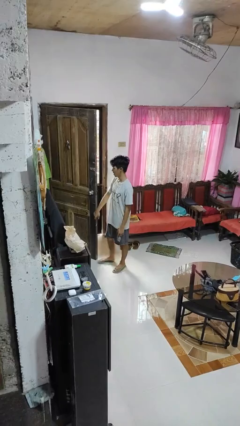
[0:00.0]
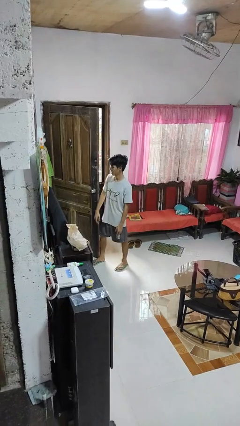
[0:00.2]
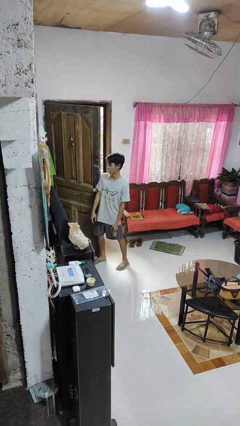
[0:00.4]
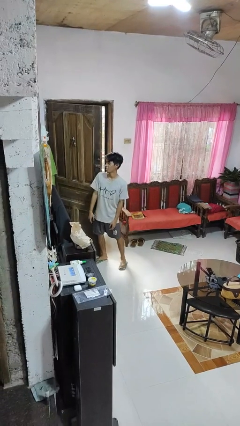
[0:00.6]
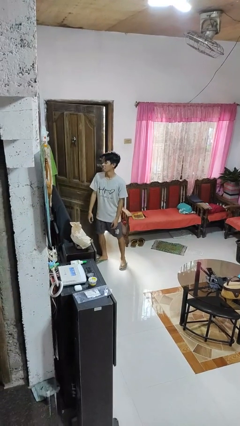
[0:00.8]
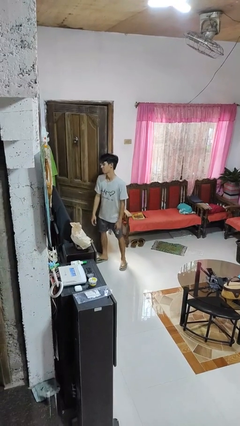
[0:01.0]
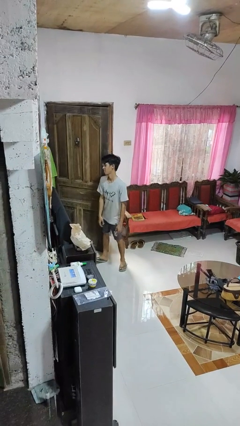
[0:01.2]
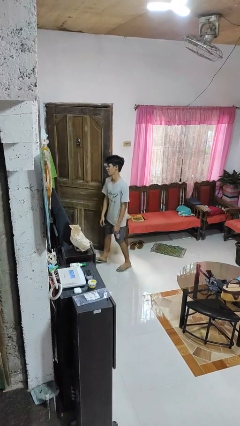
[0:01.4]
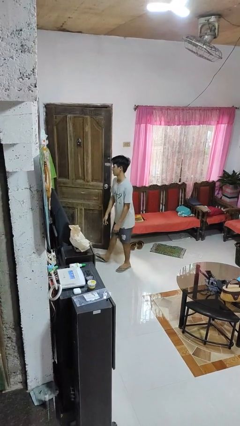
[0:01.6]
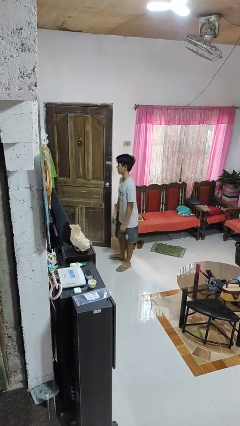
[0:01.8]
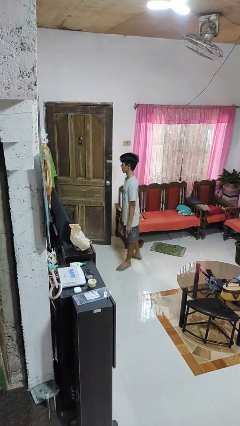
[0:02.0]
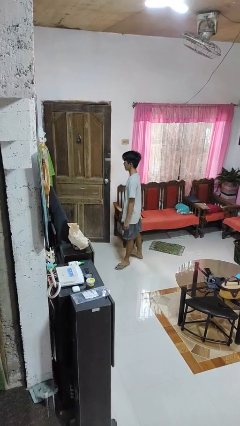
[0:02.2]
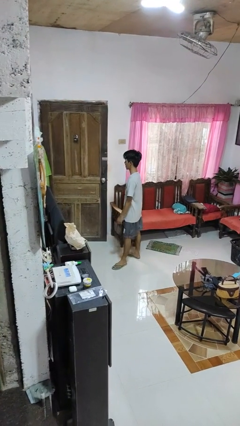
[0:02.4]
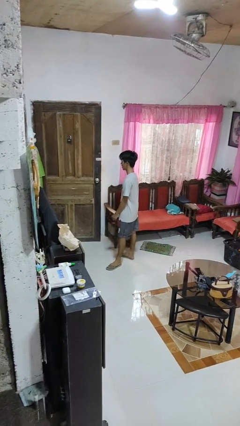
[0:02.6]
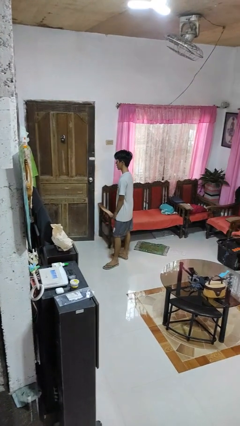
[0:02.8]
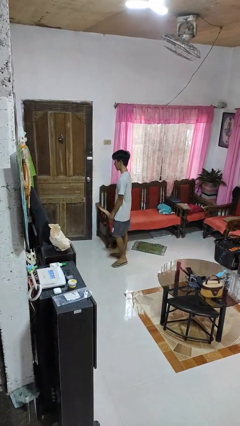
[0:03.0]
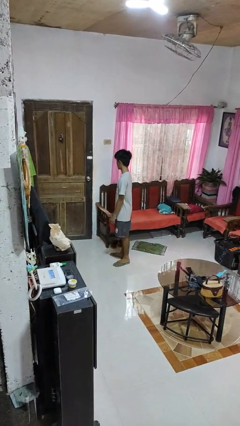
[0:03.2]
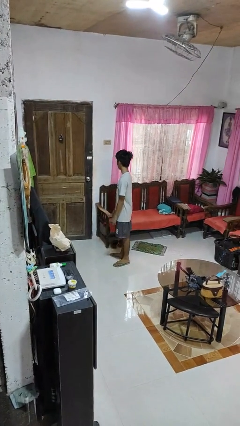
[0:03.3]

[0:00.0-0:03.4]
person closes door with hip

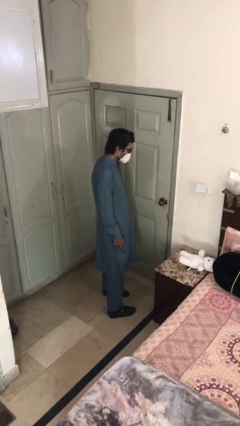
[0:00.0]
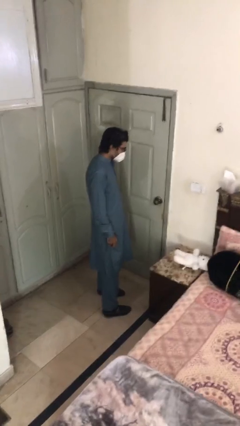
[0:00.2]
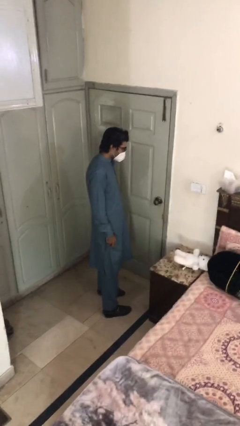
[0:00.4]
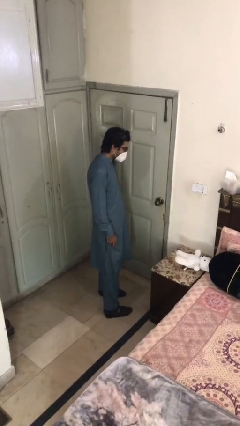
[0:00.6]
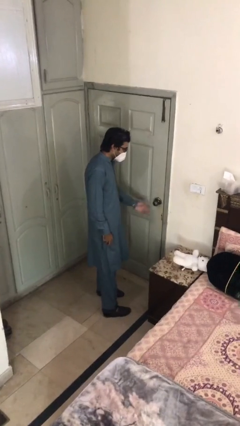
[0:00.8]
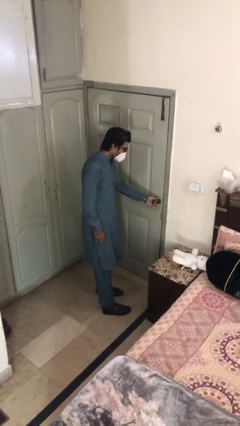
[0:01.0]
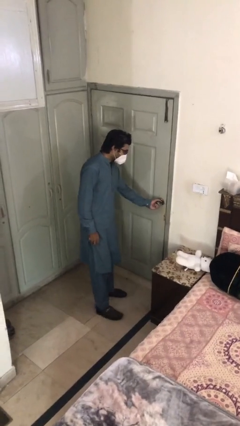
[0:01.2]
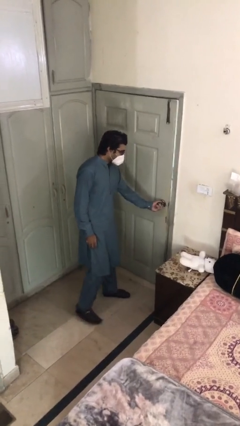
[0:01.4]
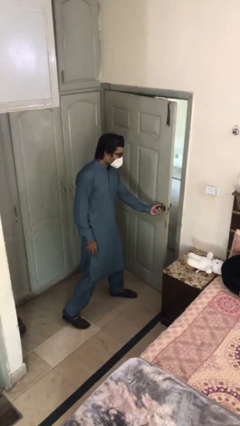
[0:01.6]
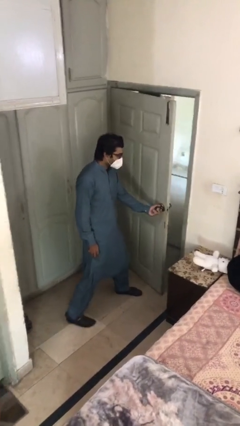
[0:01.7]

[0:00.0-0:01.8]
person opens facility door

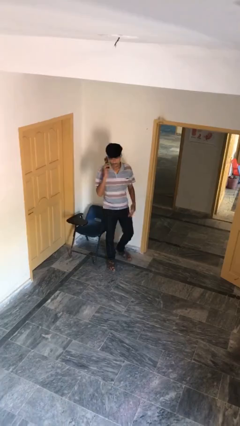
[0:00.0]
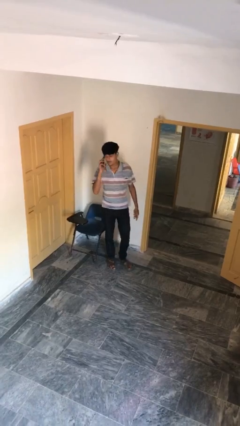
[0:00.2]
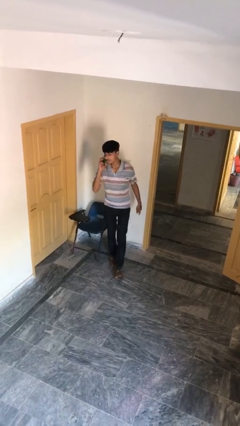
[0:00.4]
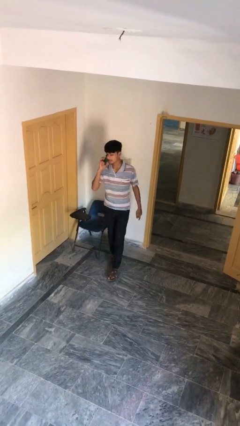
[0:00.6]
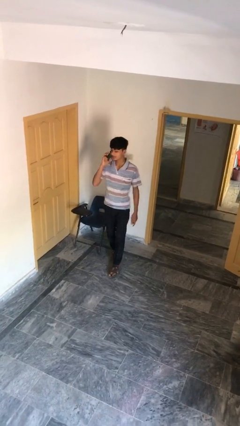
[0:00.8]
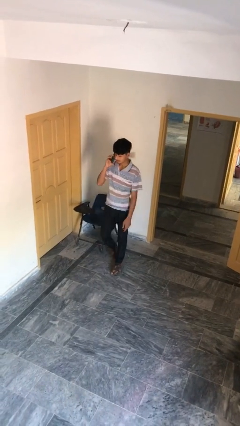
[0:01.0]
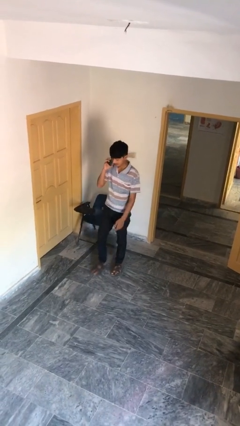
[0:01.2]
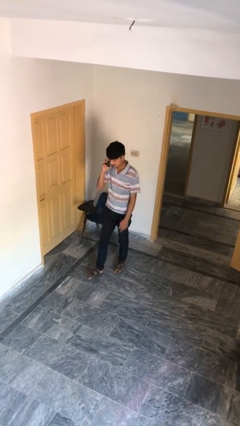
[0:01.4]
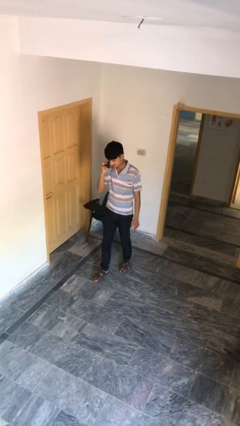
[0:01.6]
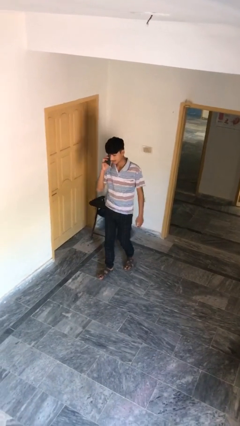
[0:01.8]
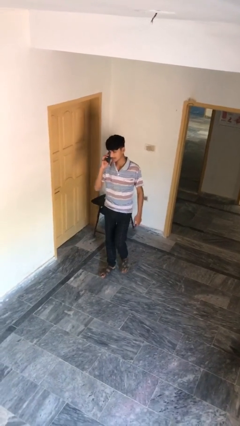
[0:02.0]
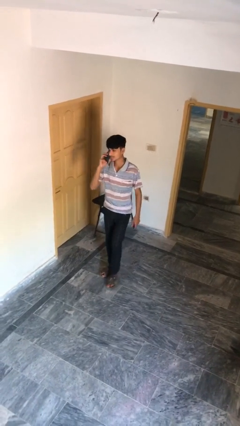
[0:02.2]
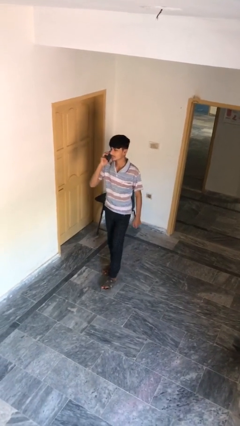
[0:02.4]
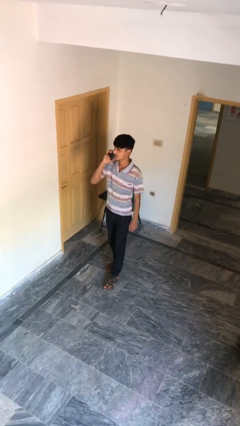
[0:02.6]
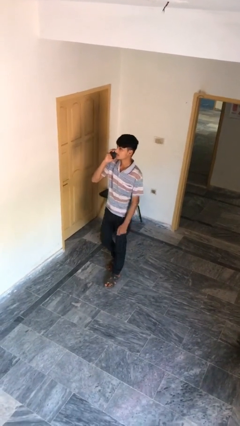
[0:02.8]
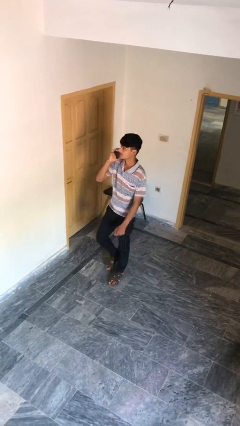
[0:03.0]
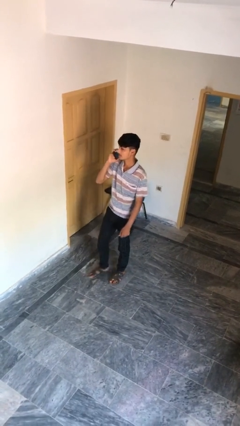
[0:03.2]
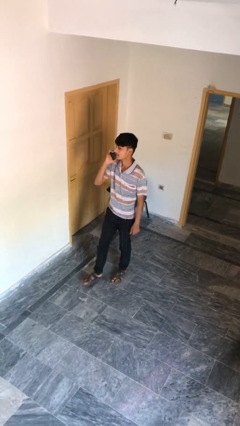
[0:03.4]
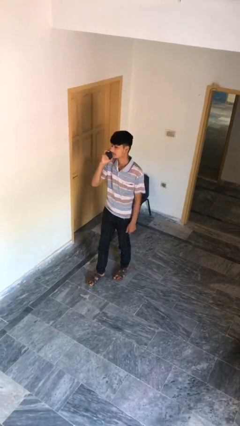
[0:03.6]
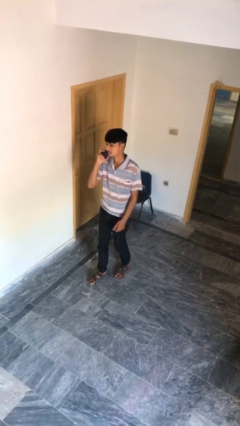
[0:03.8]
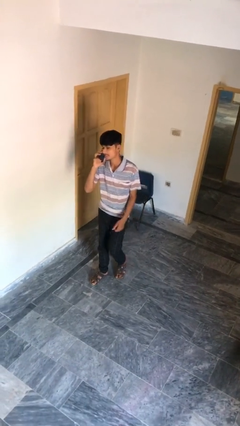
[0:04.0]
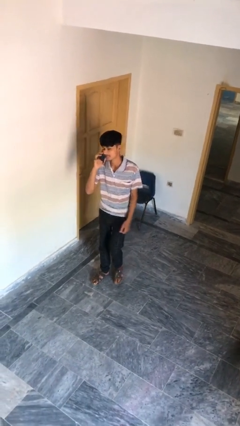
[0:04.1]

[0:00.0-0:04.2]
person talks on phone

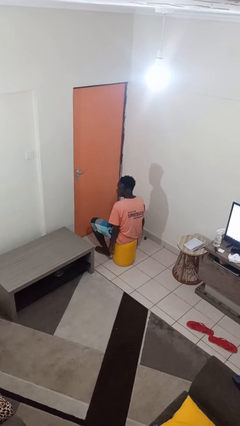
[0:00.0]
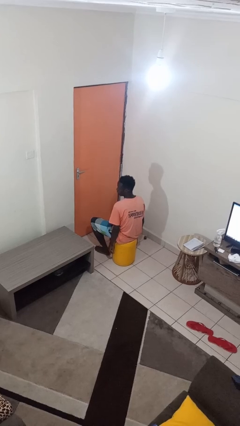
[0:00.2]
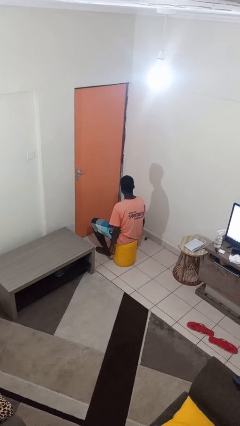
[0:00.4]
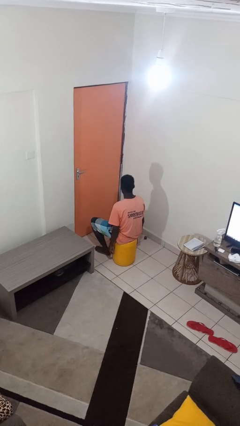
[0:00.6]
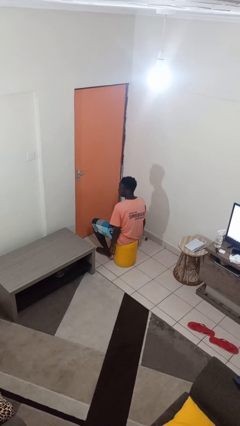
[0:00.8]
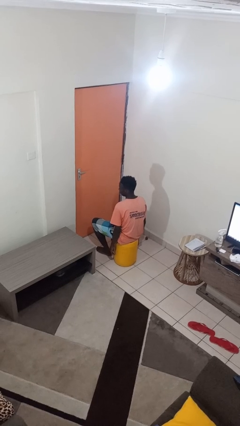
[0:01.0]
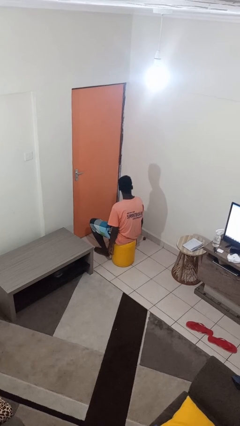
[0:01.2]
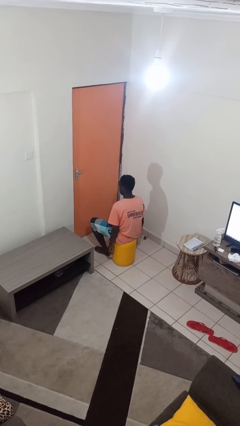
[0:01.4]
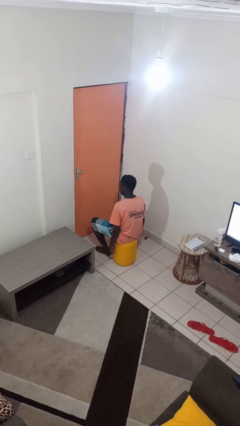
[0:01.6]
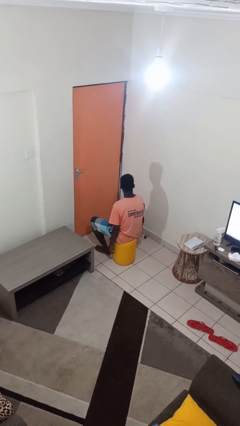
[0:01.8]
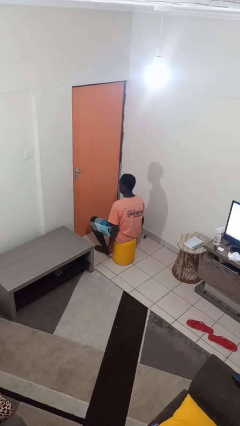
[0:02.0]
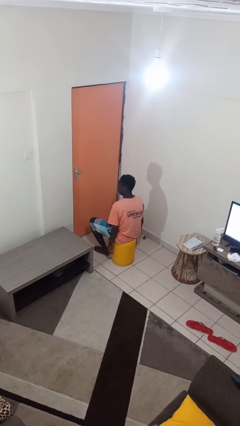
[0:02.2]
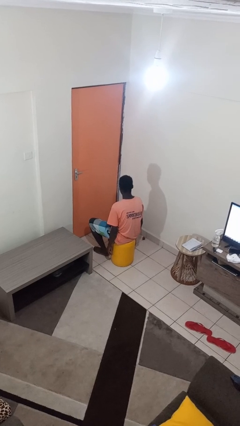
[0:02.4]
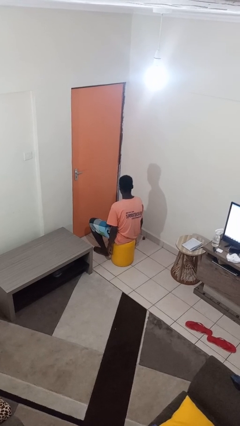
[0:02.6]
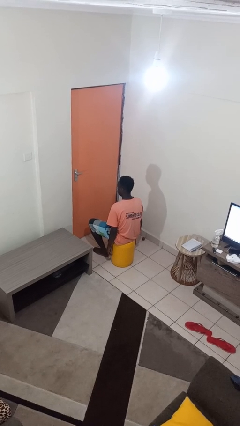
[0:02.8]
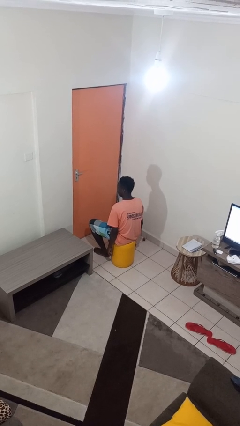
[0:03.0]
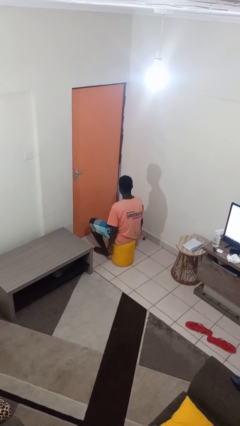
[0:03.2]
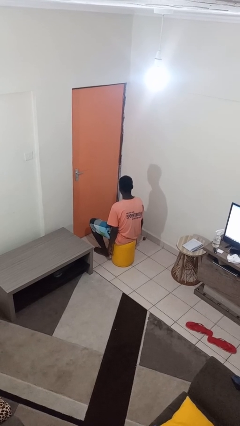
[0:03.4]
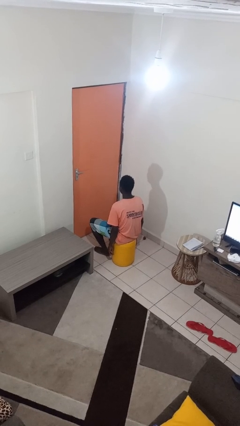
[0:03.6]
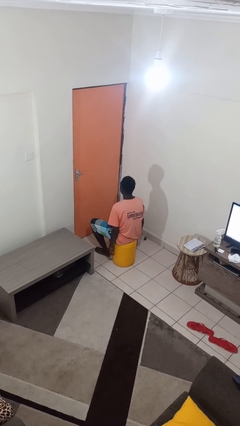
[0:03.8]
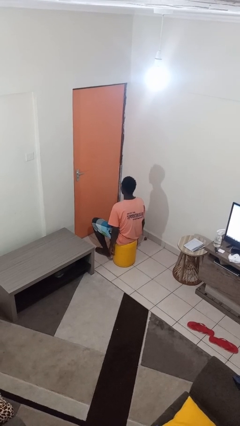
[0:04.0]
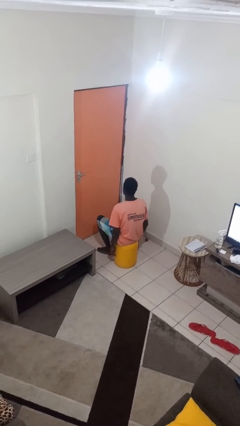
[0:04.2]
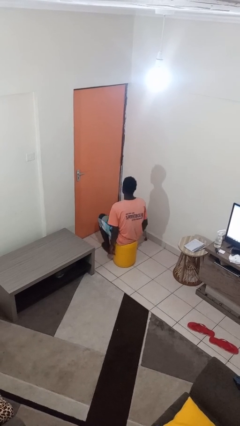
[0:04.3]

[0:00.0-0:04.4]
person shakes head

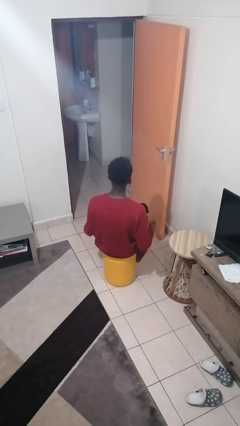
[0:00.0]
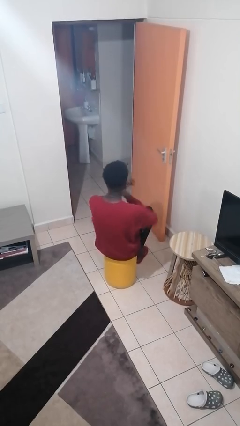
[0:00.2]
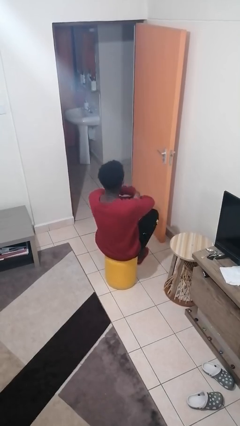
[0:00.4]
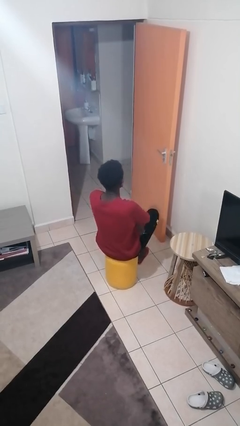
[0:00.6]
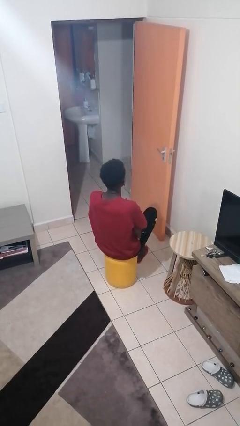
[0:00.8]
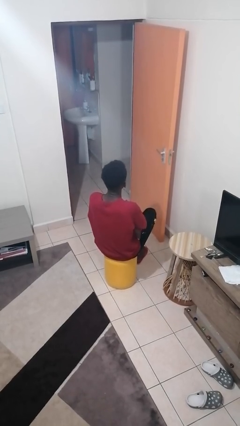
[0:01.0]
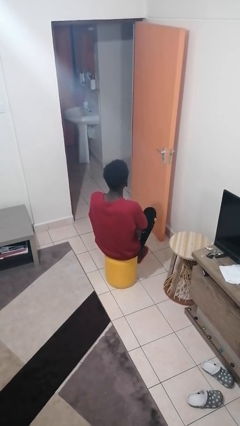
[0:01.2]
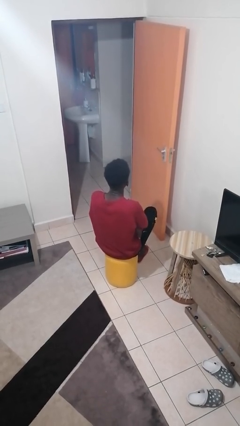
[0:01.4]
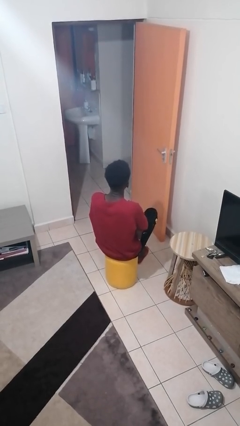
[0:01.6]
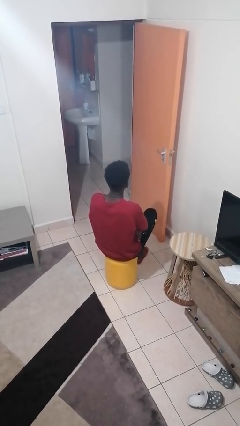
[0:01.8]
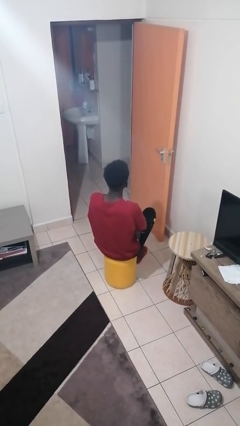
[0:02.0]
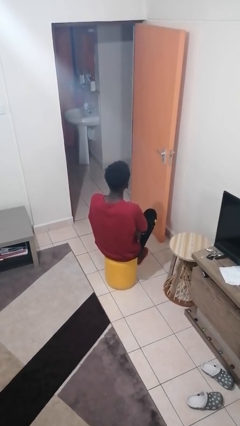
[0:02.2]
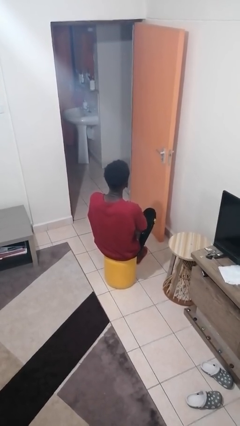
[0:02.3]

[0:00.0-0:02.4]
person crosses arms

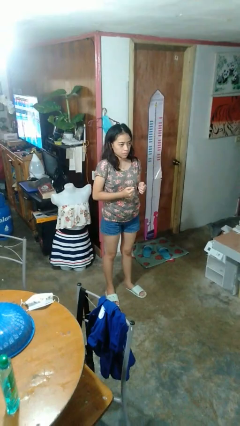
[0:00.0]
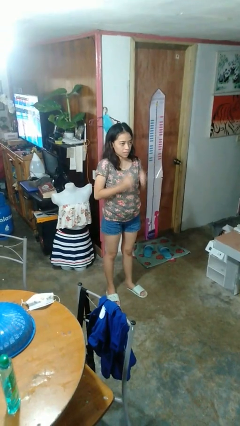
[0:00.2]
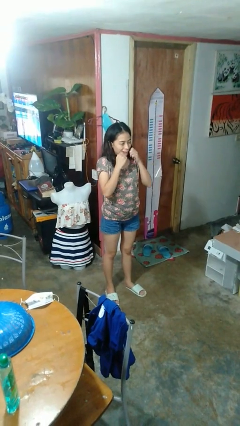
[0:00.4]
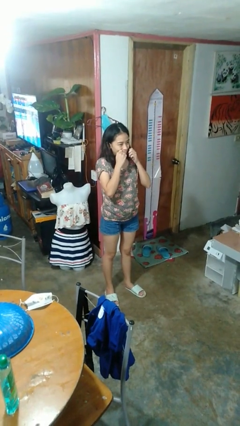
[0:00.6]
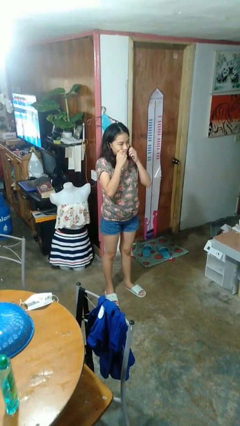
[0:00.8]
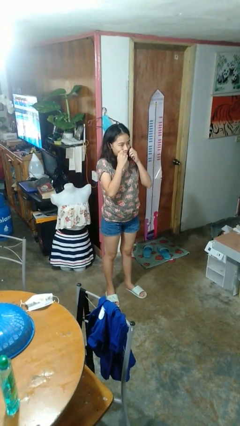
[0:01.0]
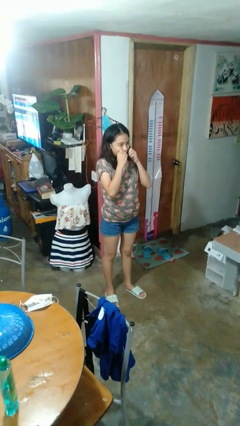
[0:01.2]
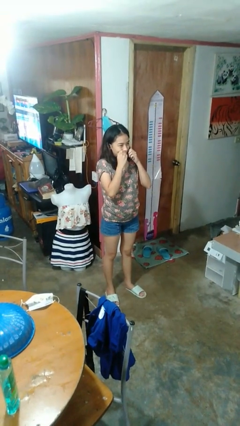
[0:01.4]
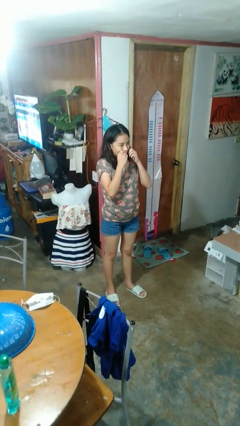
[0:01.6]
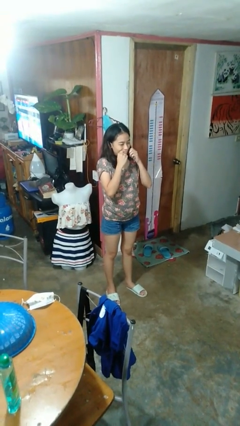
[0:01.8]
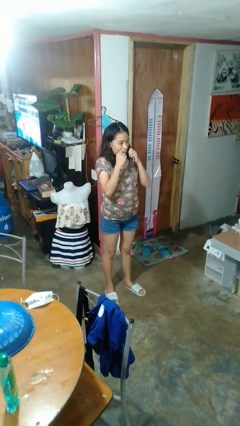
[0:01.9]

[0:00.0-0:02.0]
person flosses
